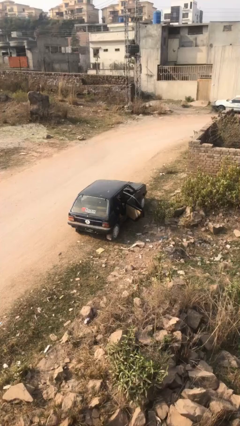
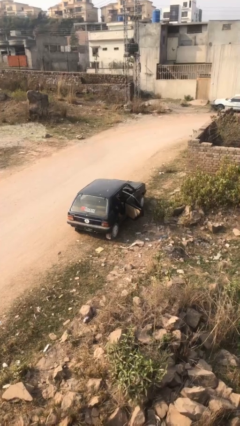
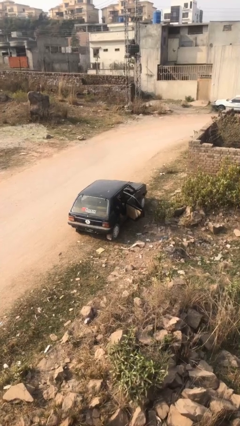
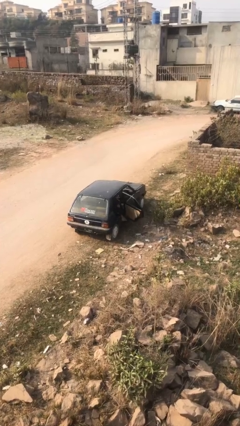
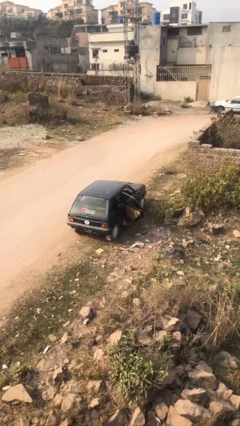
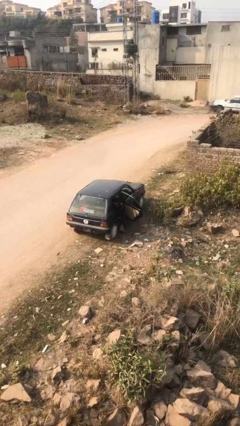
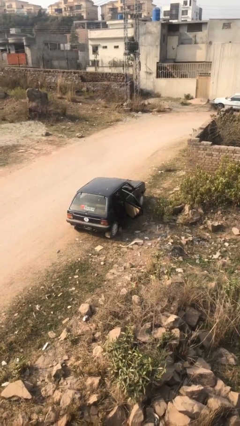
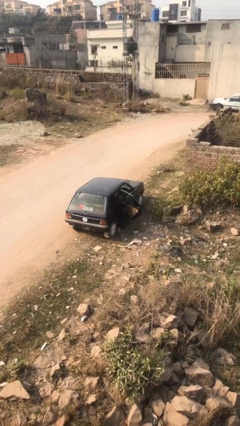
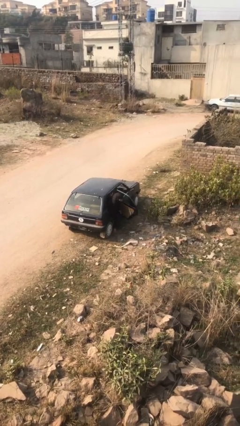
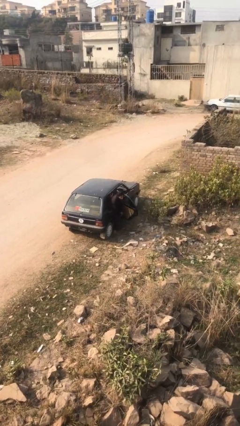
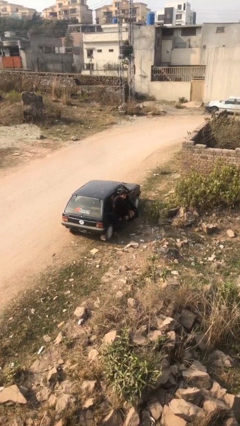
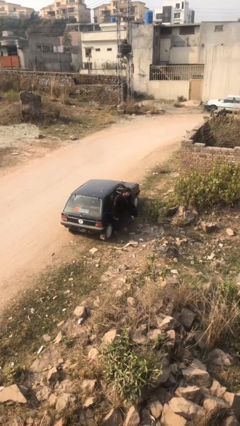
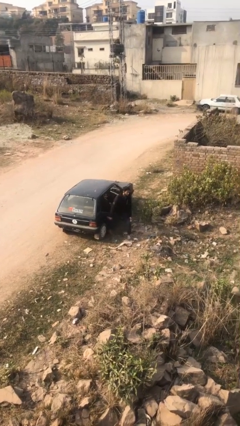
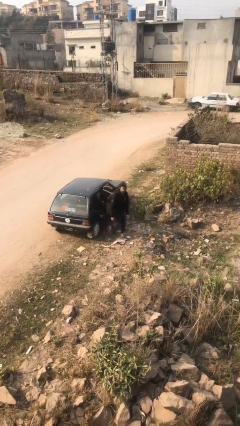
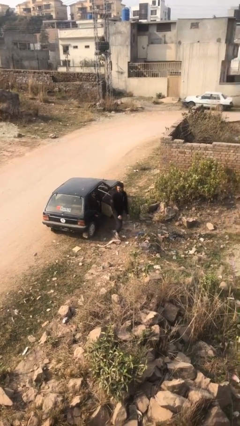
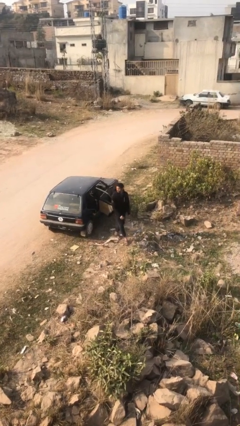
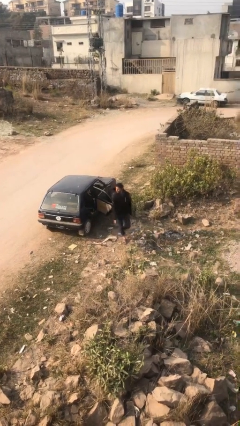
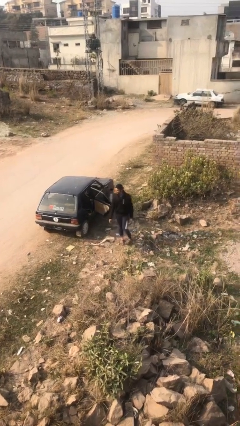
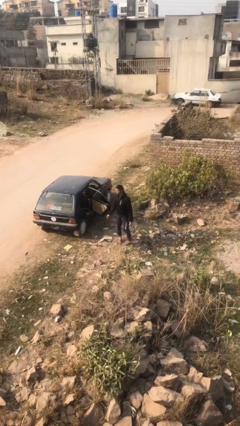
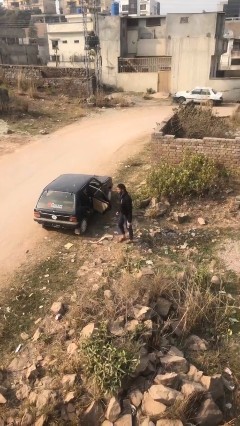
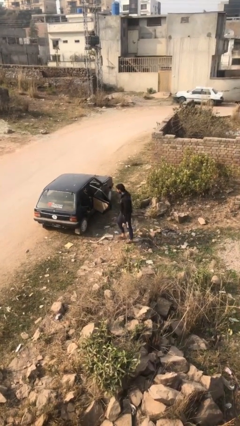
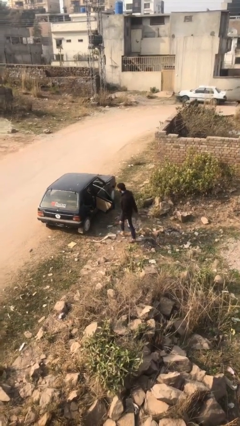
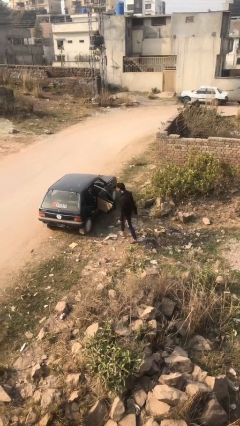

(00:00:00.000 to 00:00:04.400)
person exits car

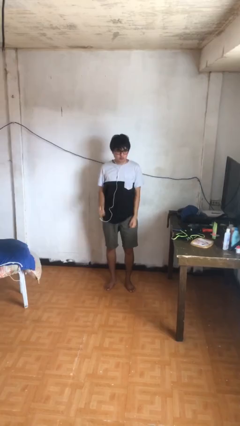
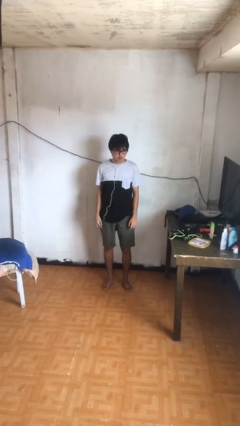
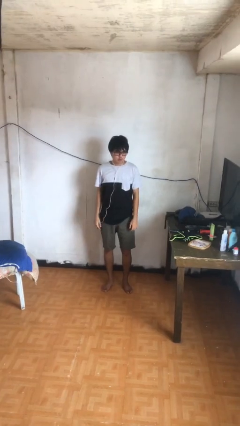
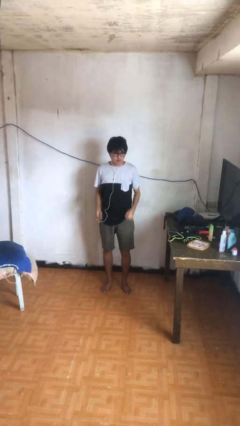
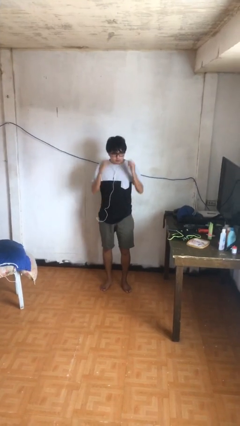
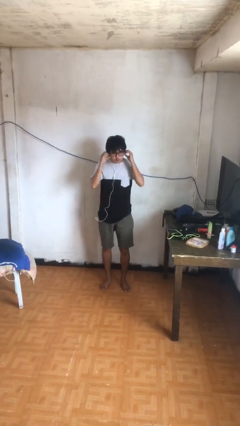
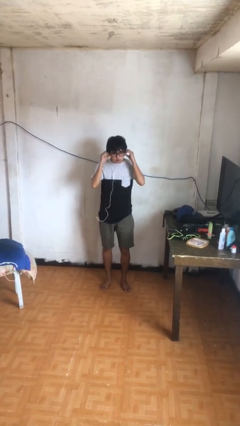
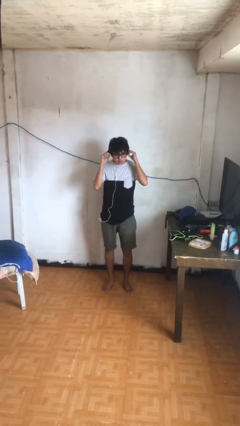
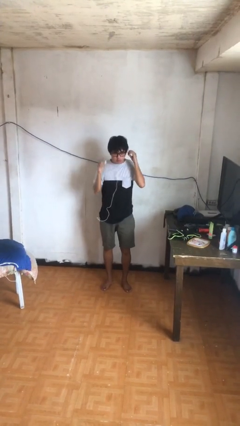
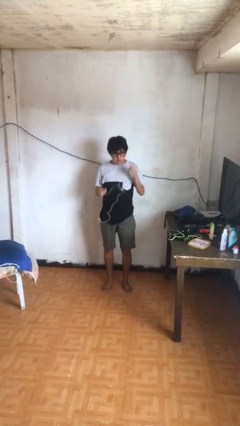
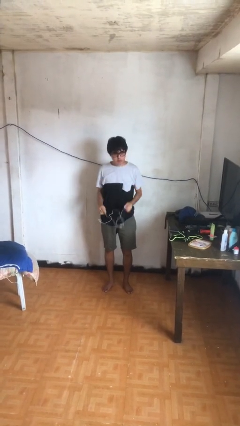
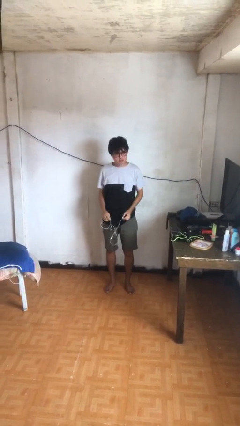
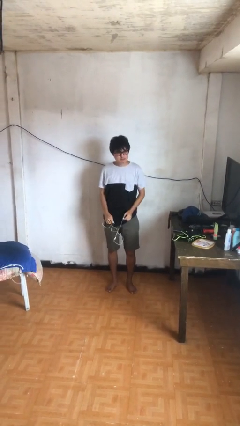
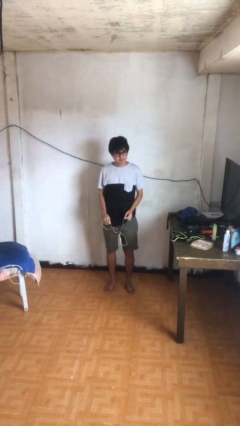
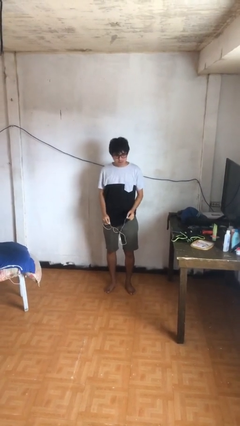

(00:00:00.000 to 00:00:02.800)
person takes off headphones

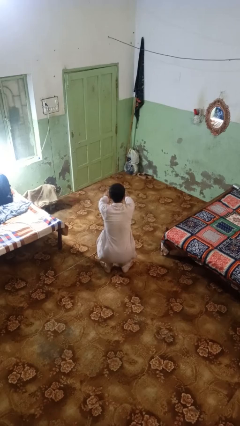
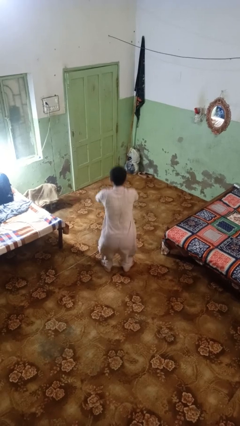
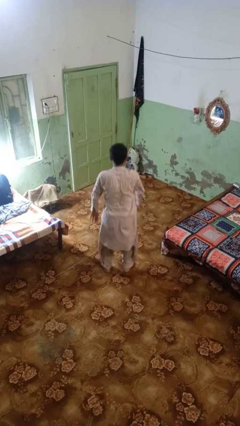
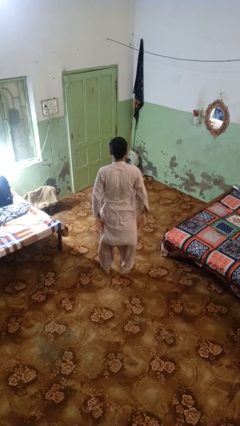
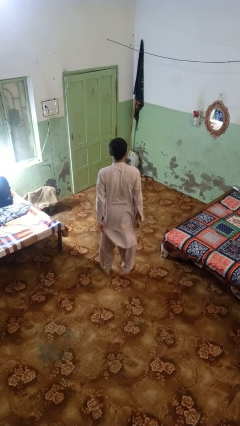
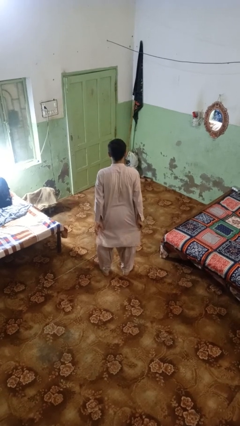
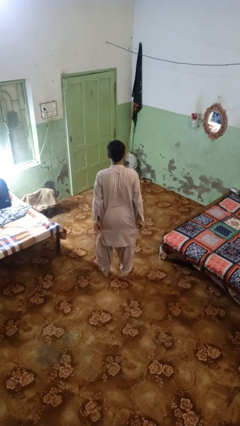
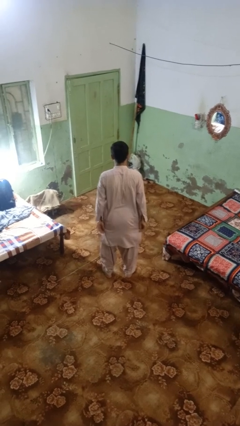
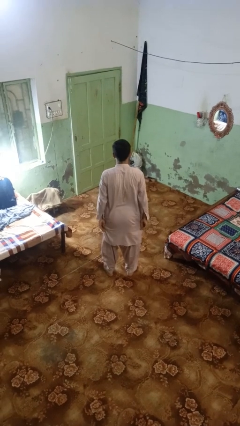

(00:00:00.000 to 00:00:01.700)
person stands up

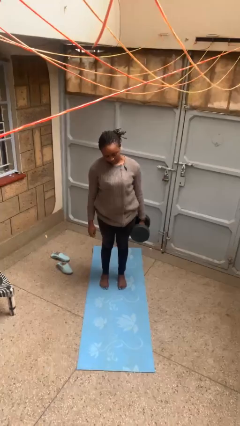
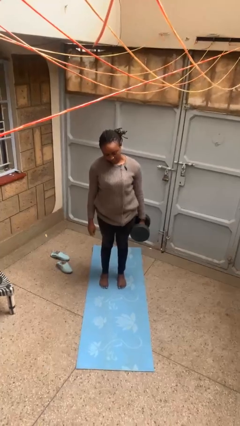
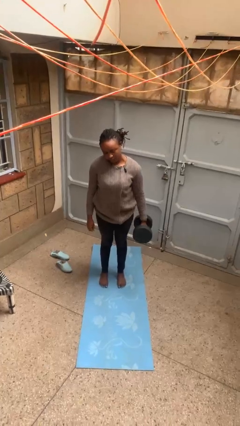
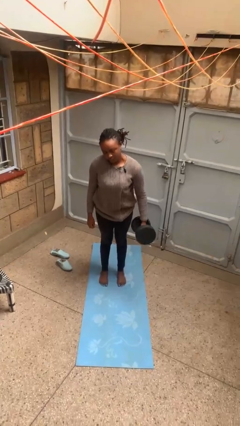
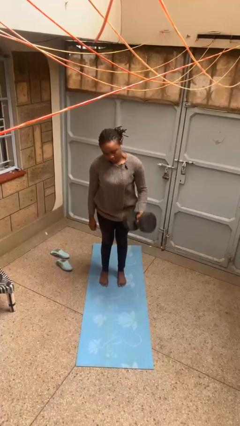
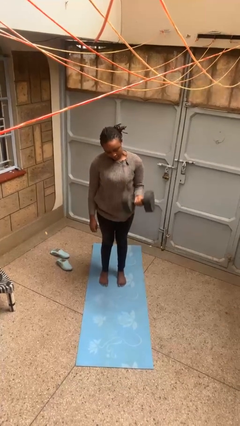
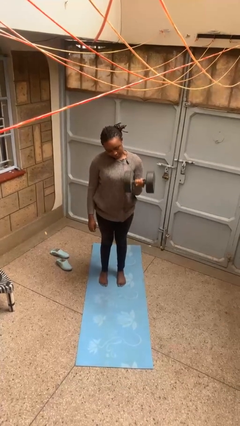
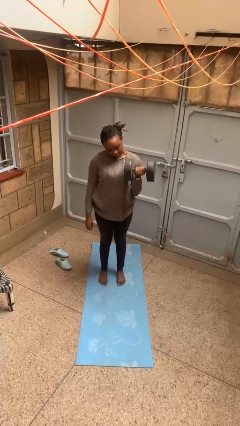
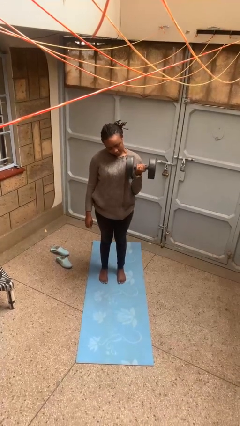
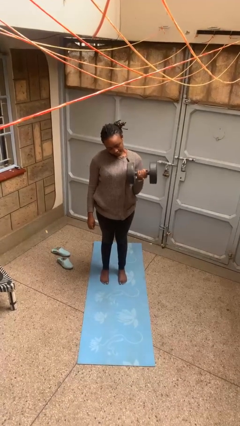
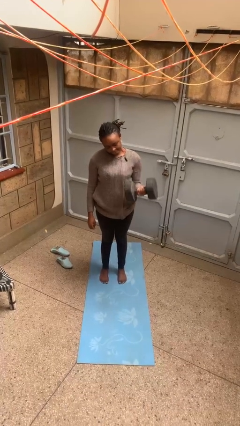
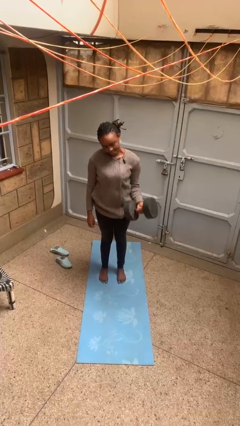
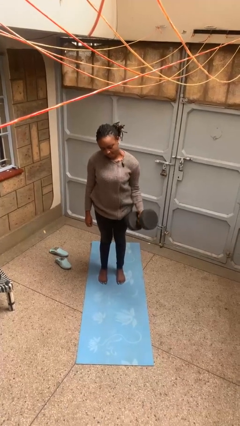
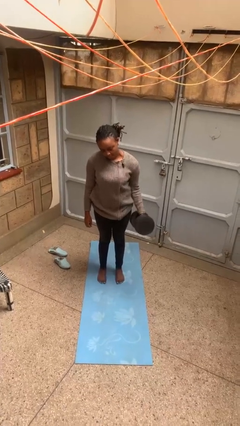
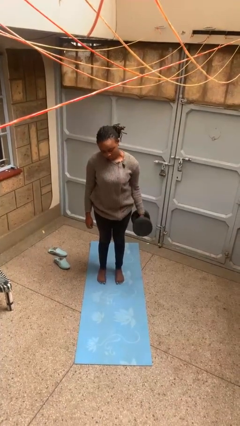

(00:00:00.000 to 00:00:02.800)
person lifts dumbbells

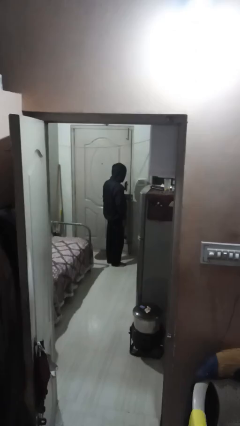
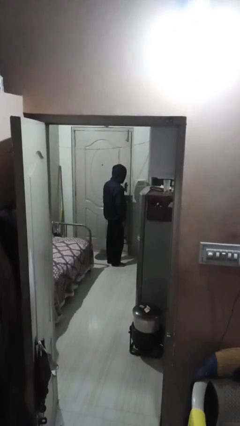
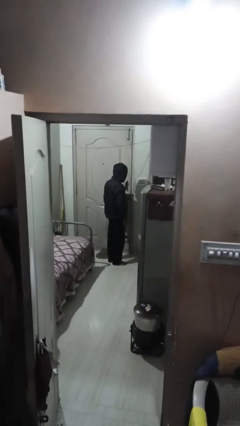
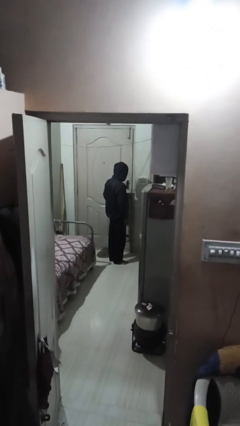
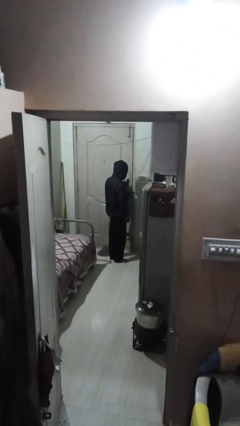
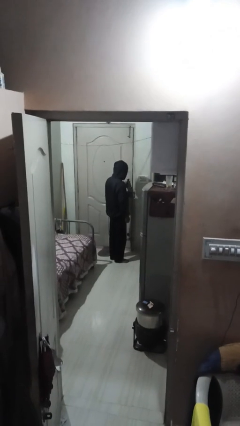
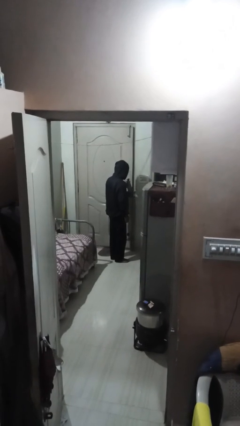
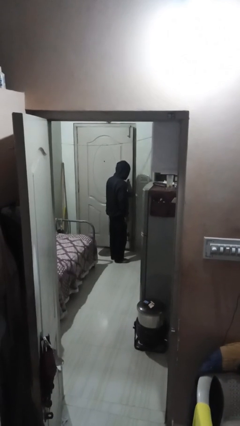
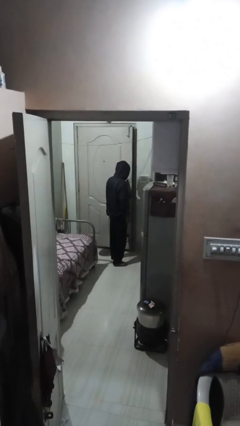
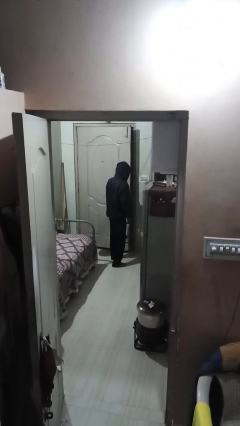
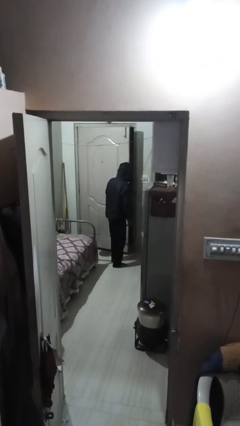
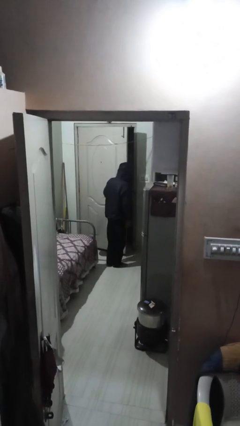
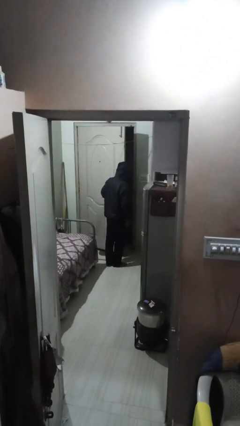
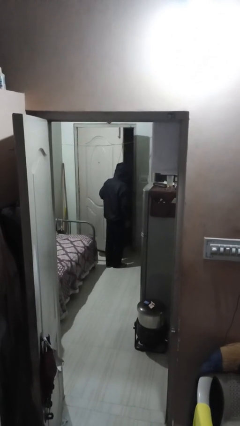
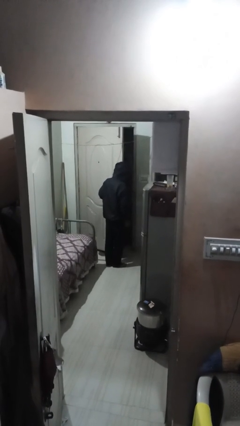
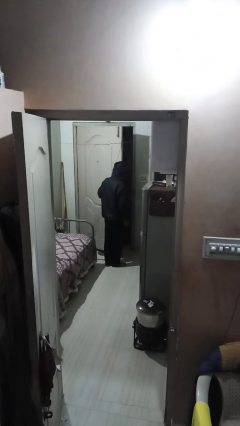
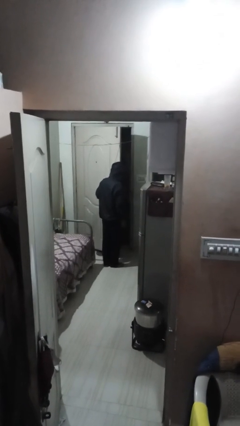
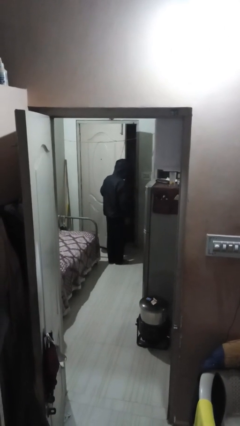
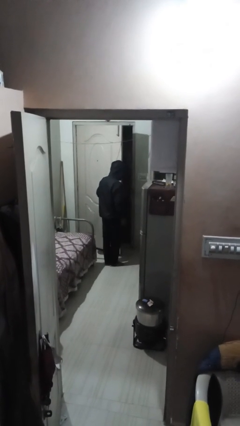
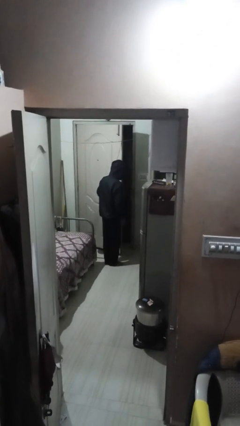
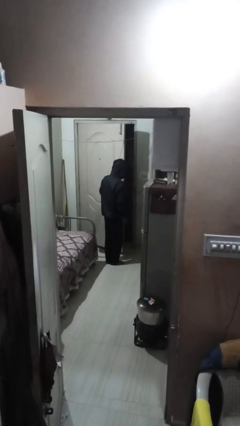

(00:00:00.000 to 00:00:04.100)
person opens facility door

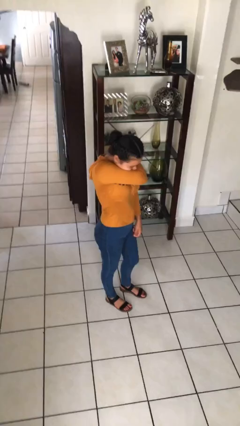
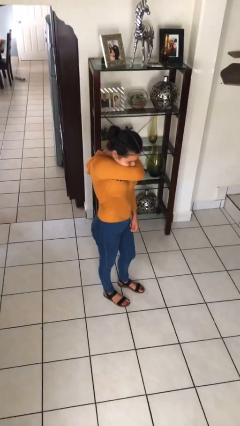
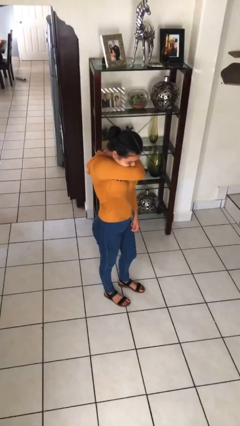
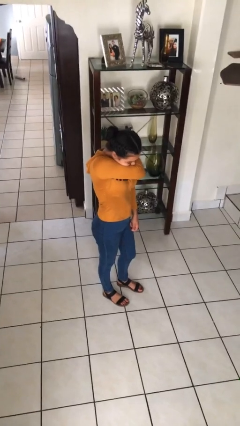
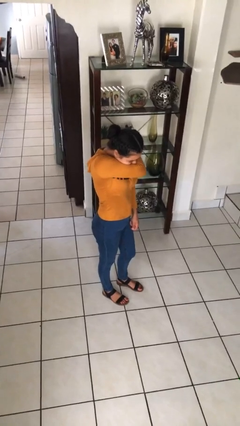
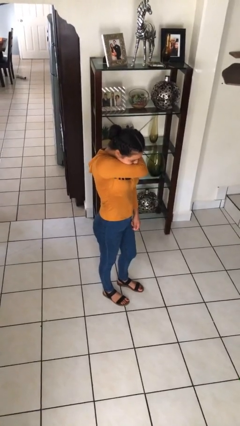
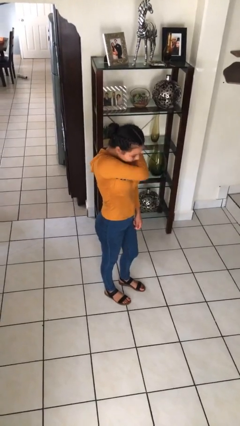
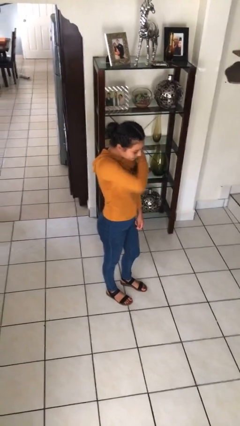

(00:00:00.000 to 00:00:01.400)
person sneezes into arm
